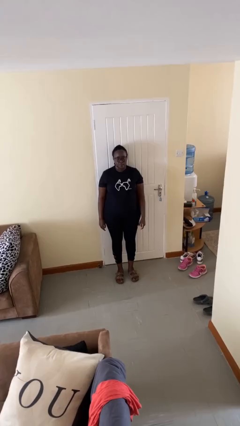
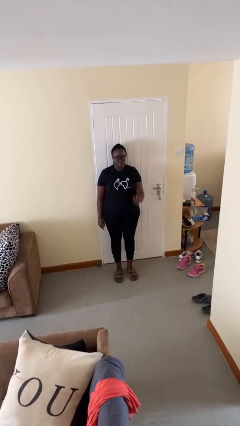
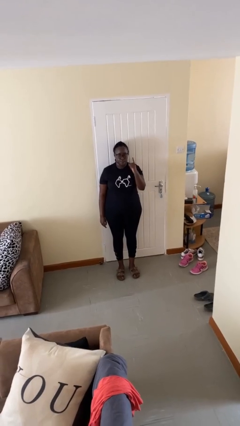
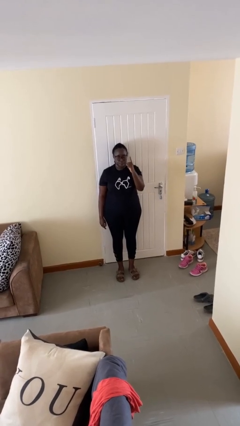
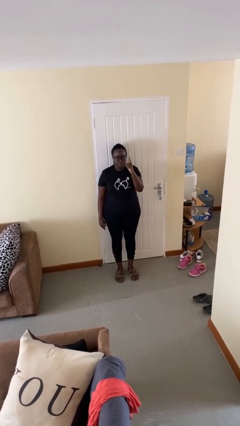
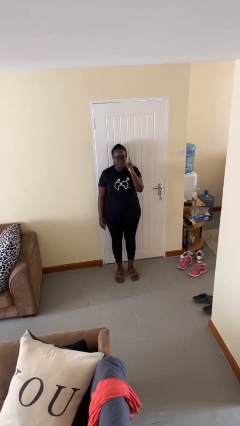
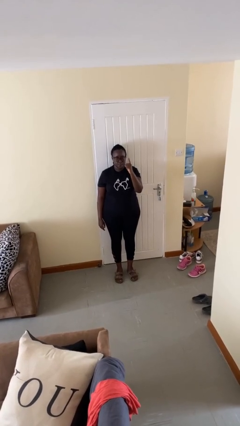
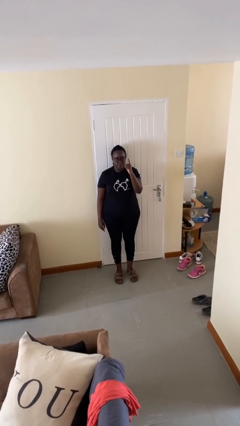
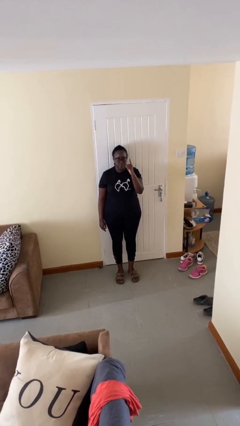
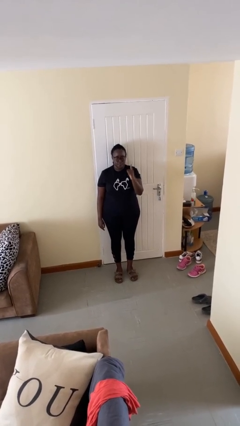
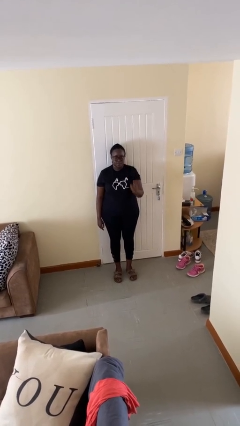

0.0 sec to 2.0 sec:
person gestures number one

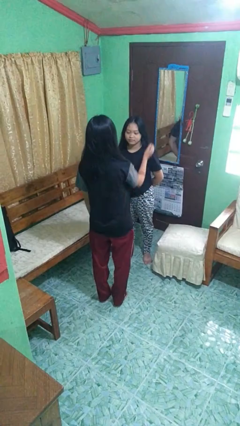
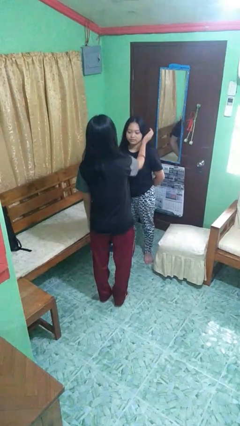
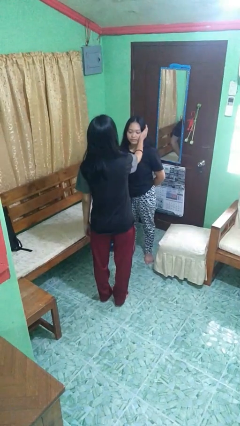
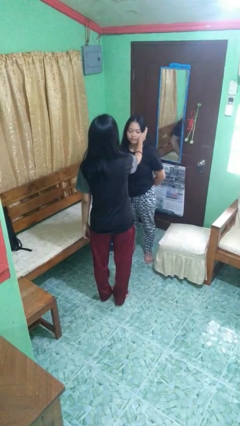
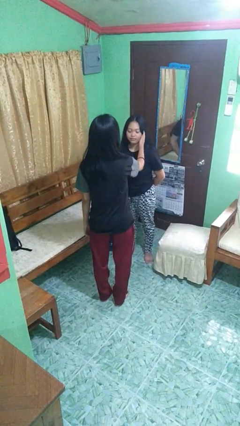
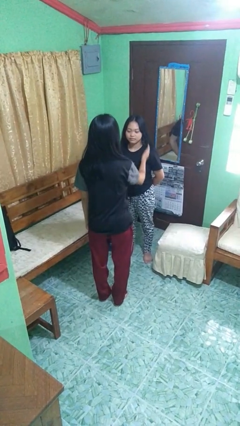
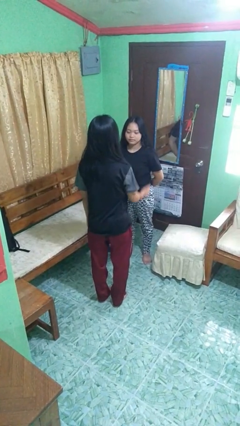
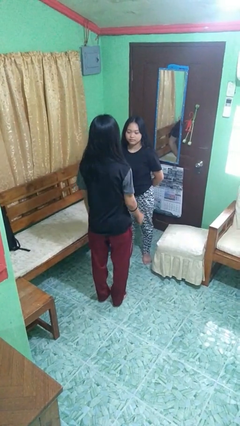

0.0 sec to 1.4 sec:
person touches face of person

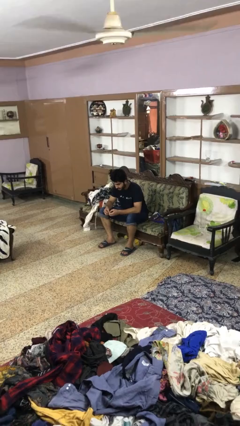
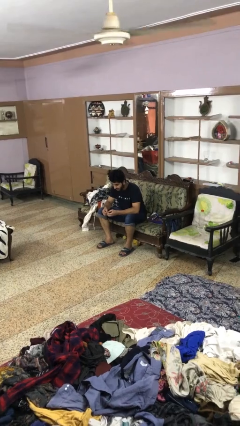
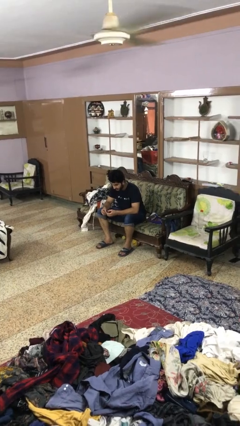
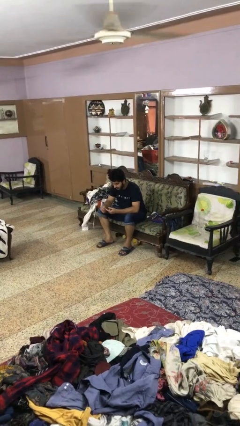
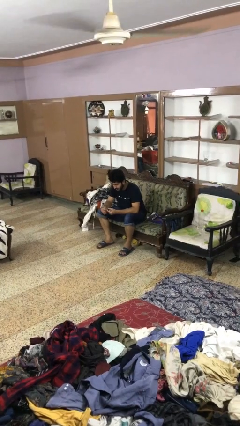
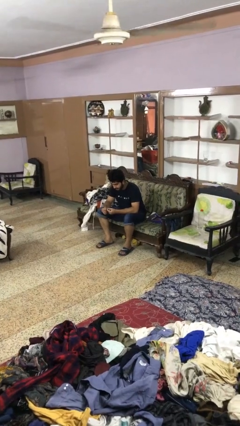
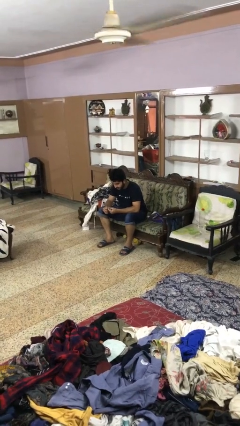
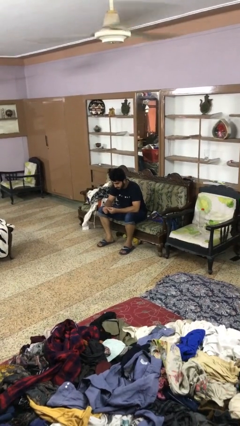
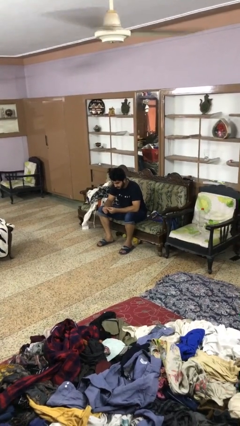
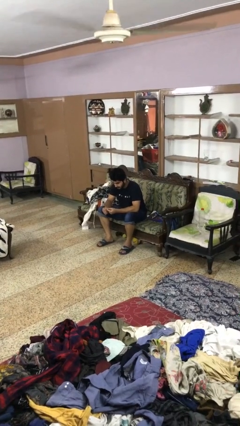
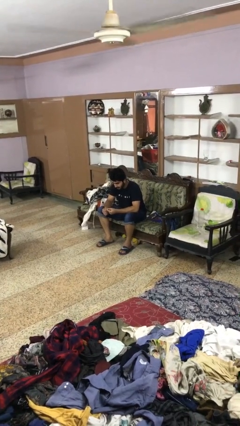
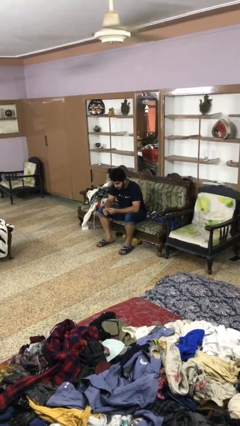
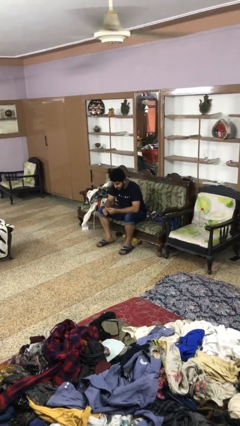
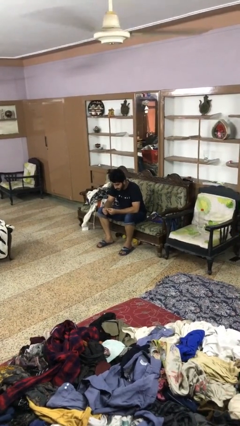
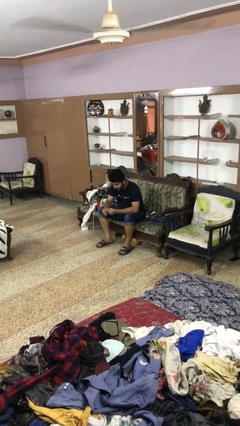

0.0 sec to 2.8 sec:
person files fingernails

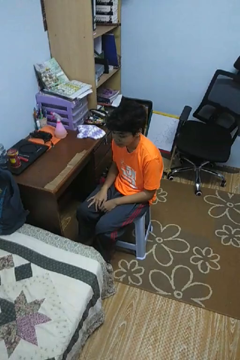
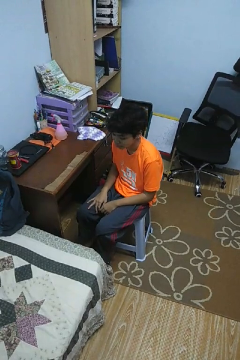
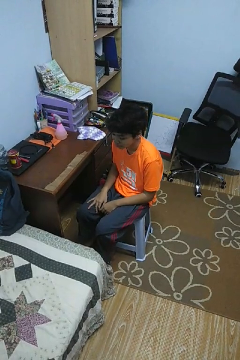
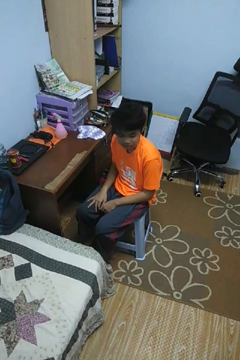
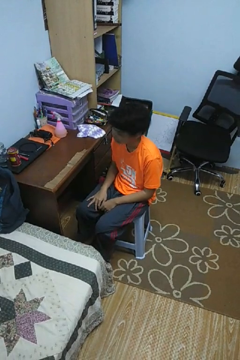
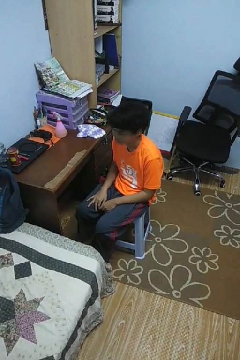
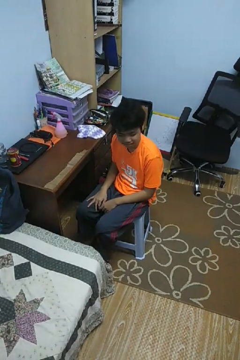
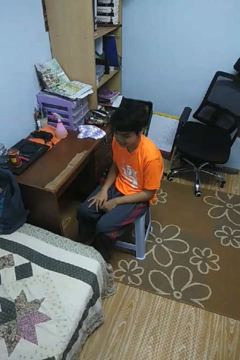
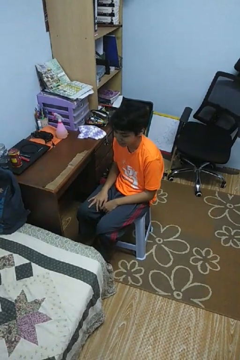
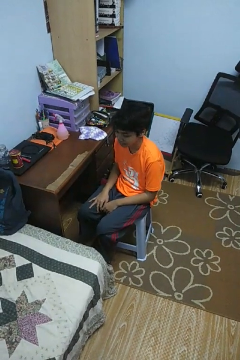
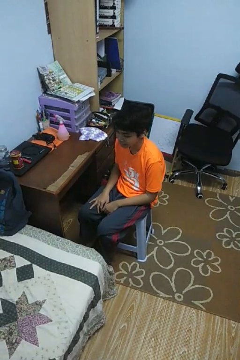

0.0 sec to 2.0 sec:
person shakes head

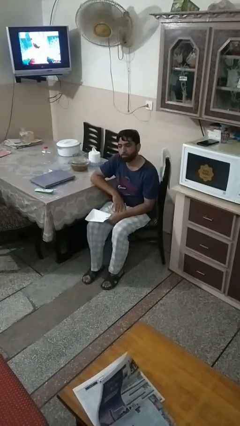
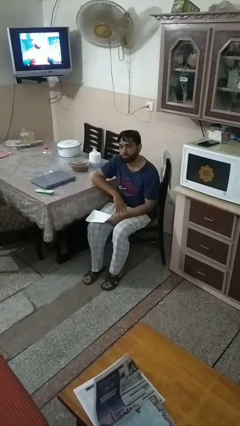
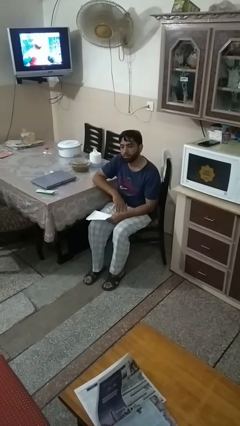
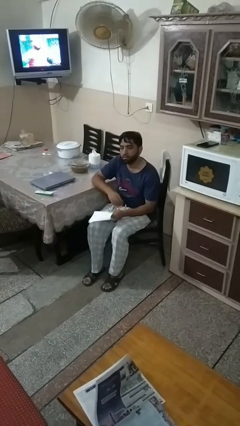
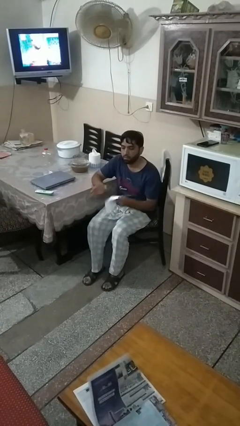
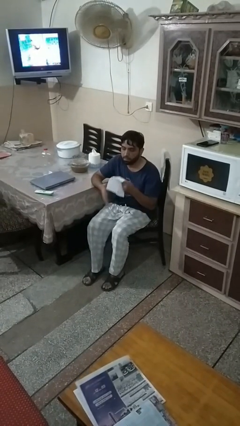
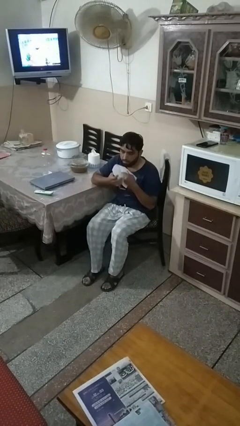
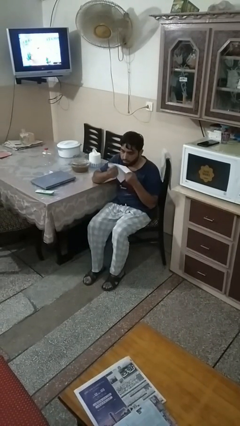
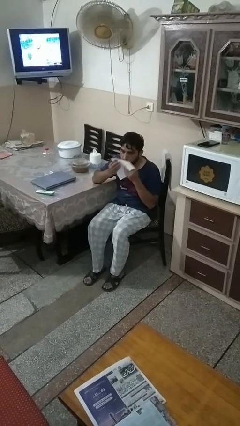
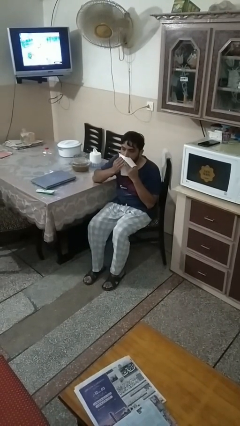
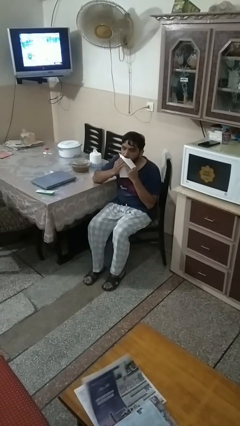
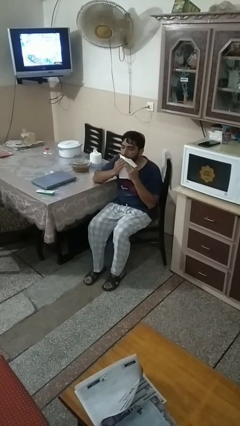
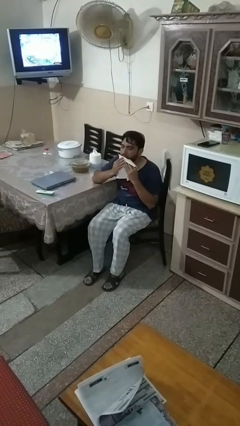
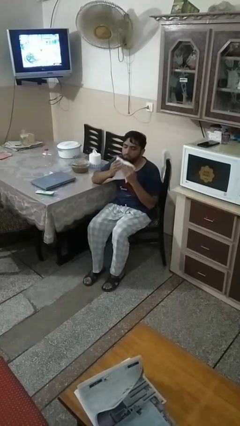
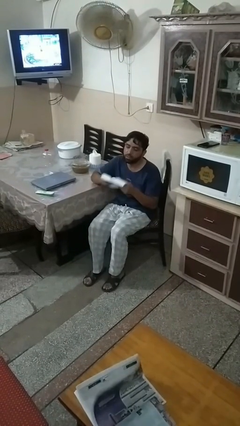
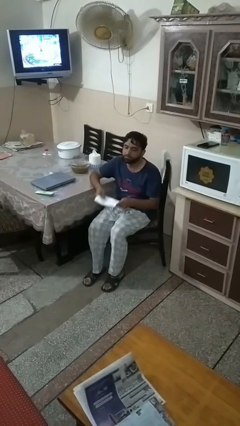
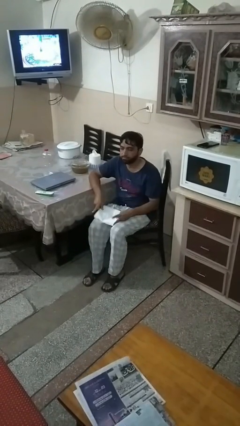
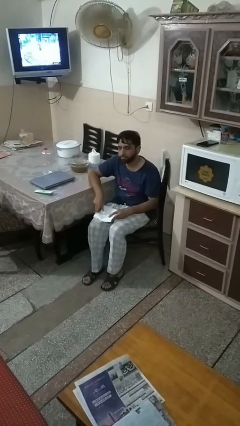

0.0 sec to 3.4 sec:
person wipes mouth with napkin

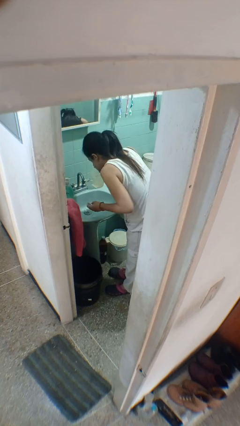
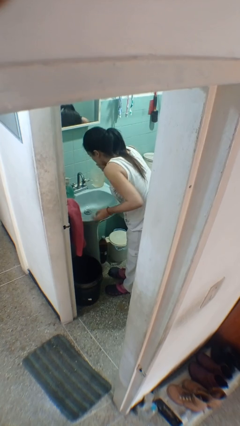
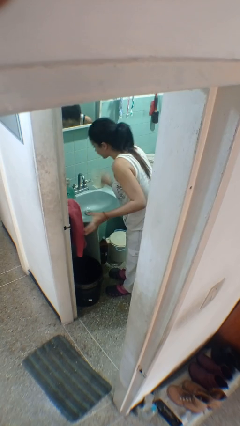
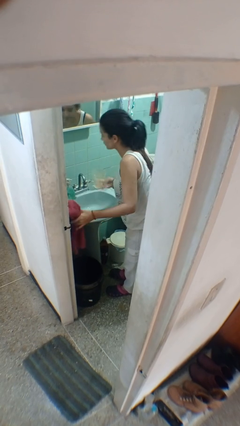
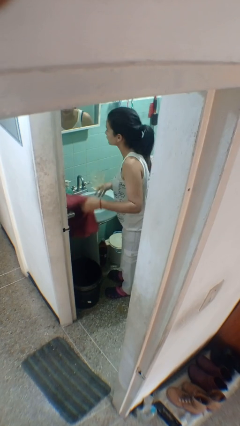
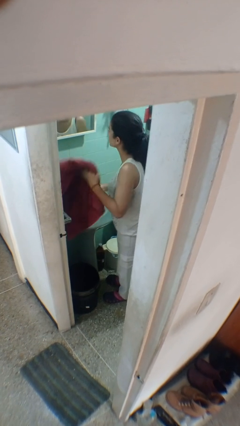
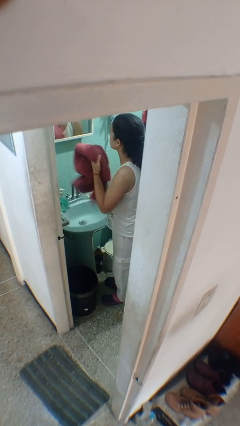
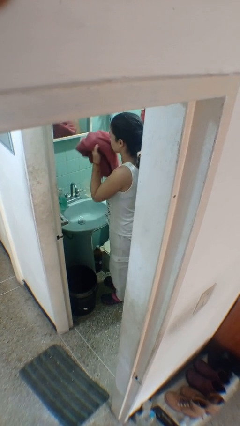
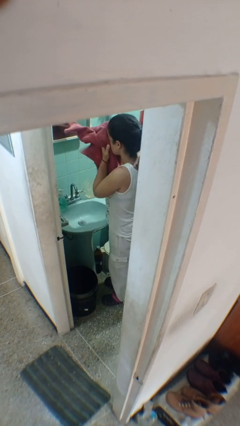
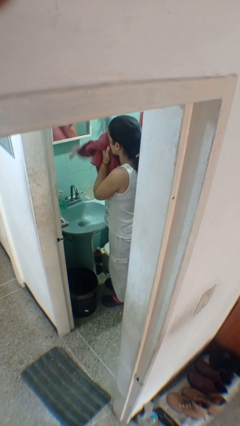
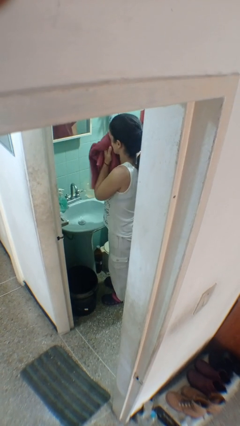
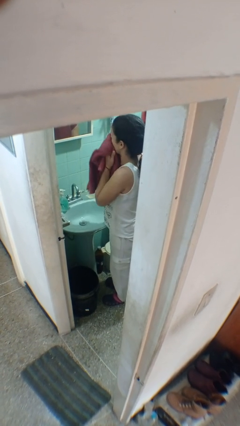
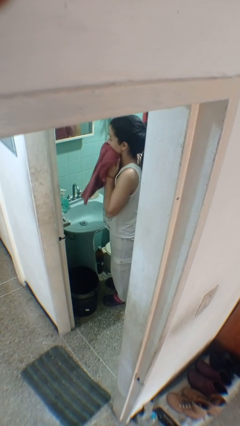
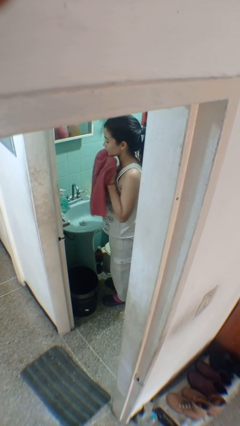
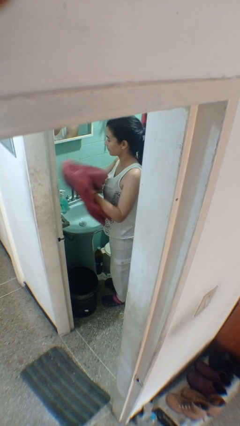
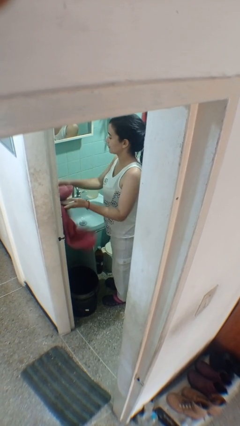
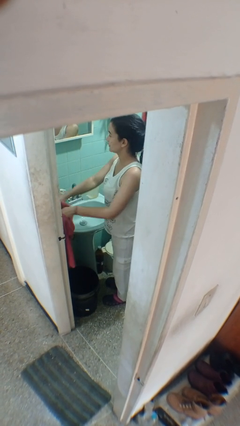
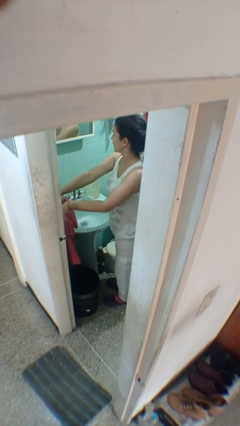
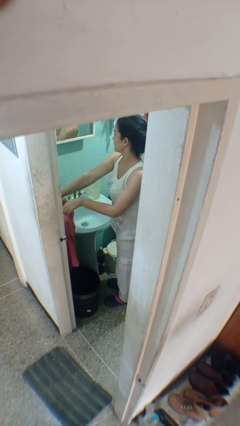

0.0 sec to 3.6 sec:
person dries face with towel

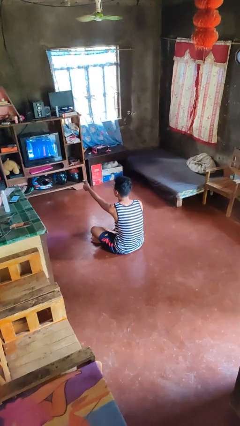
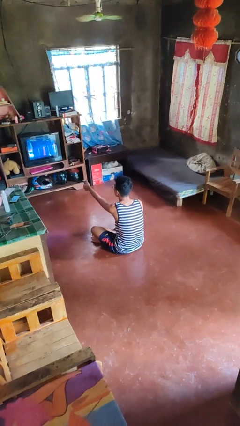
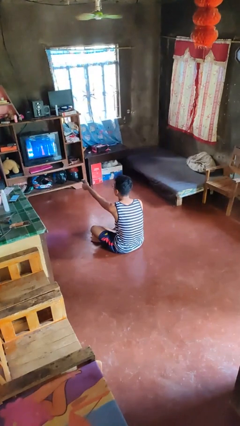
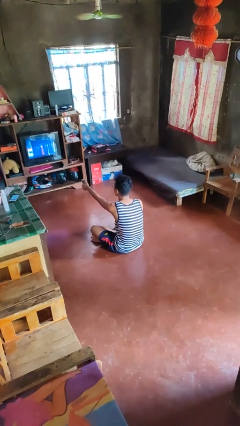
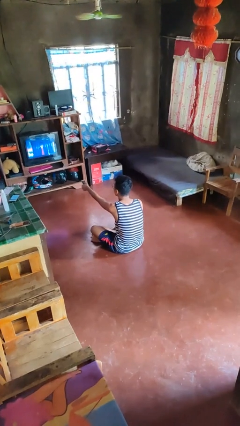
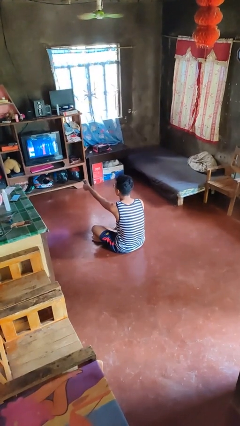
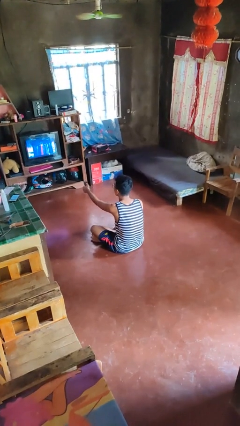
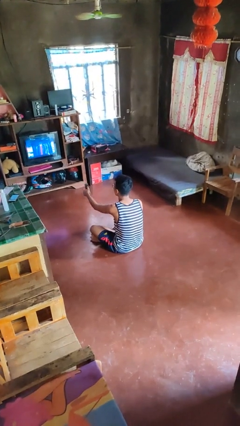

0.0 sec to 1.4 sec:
person uses television remote

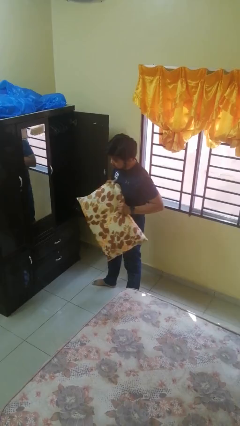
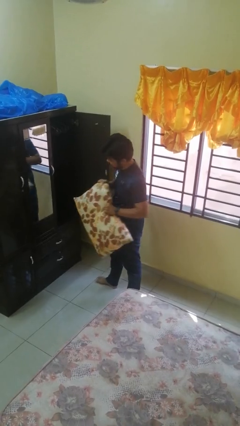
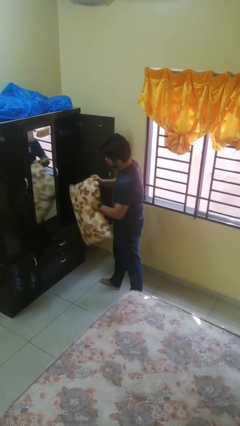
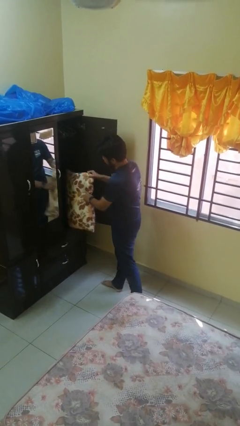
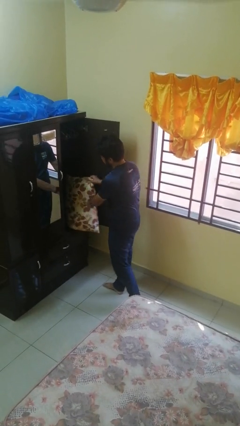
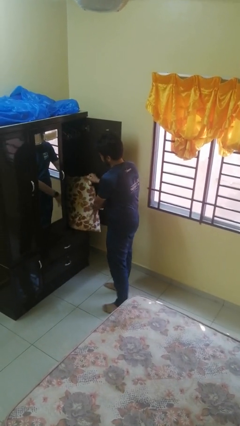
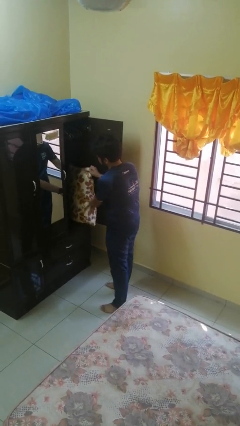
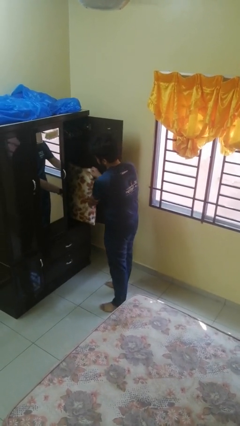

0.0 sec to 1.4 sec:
person puts down object into cabinet
